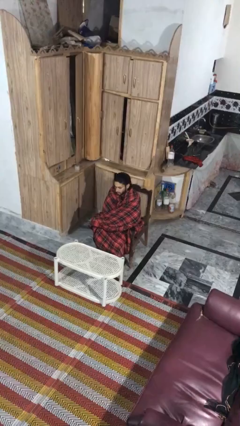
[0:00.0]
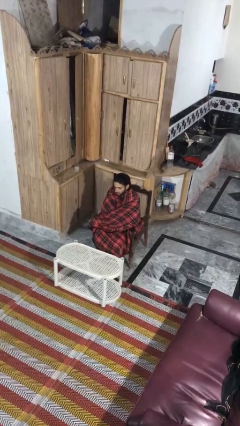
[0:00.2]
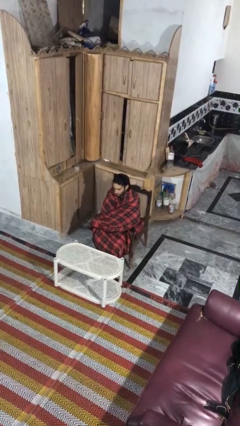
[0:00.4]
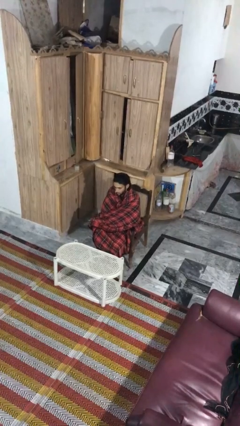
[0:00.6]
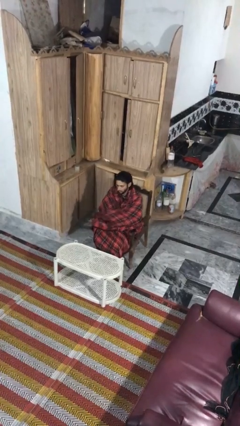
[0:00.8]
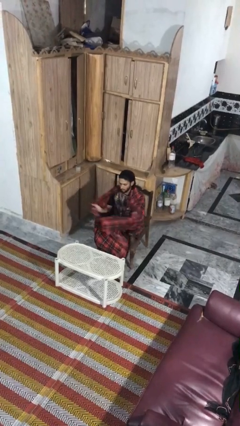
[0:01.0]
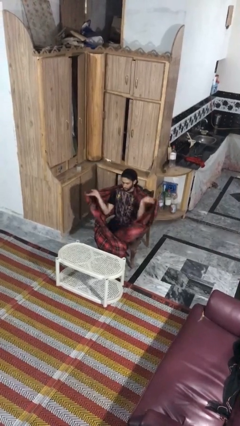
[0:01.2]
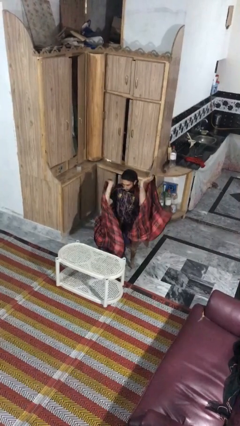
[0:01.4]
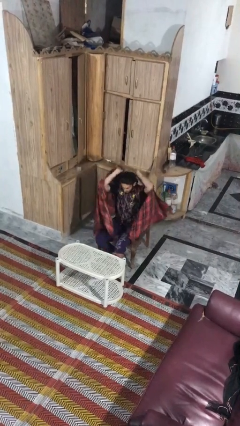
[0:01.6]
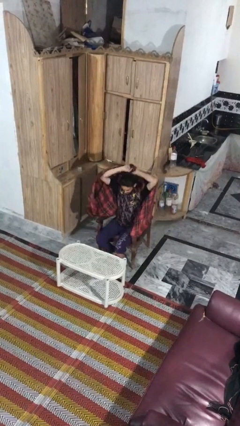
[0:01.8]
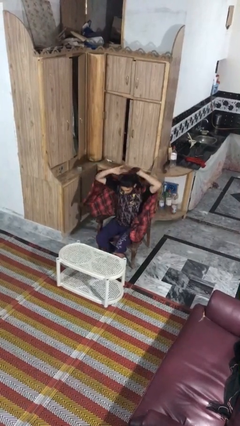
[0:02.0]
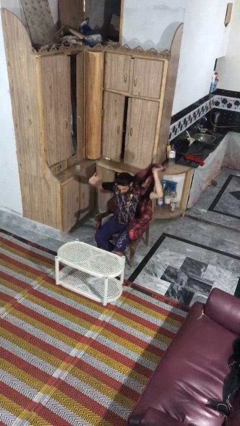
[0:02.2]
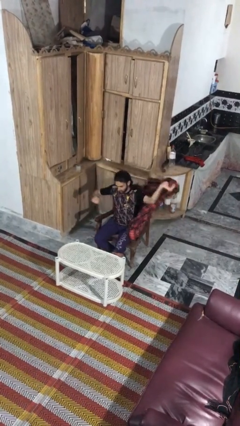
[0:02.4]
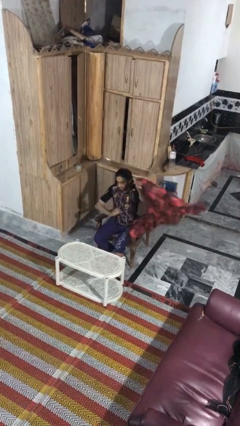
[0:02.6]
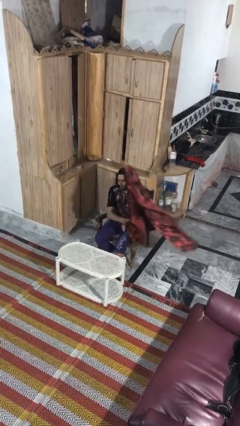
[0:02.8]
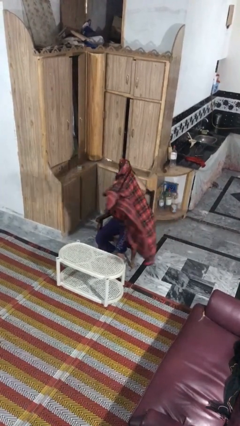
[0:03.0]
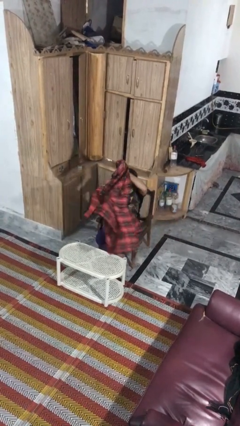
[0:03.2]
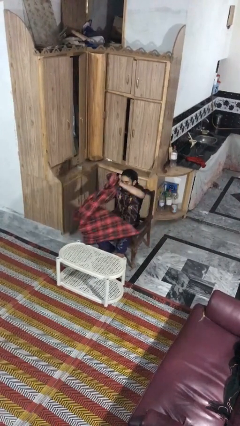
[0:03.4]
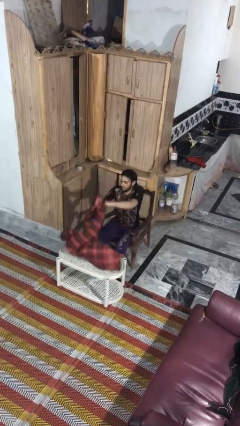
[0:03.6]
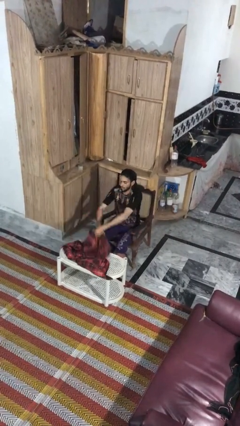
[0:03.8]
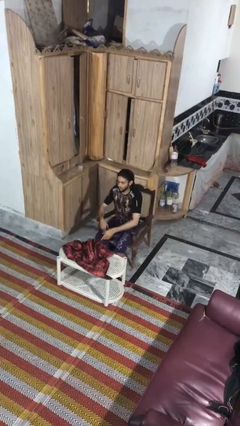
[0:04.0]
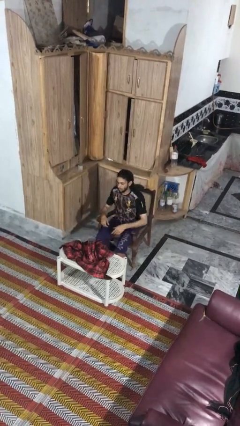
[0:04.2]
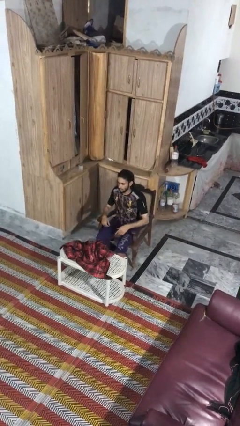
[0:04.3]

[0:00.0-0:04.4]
person uncovers with blanket

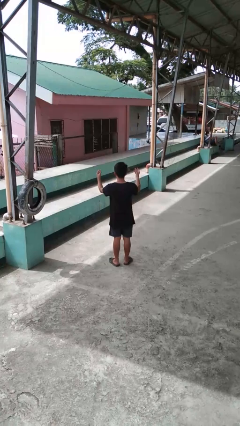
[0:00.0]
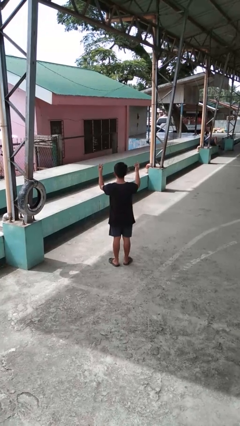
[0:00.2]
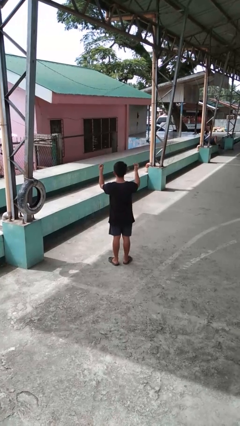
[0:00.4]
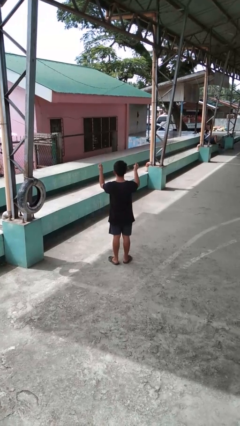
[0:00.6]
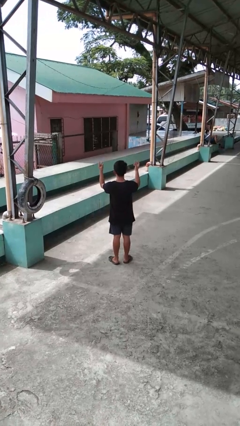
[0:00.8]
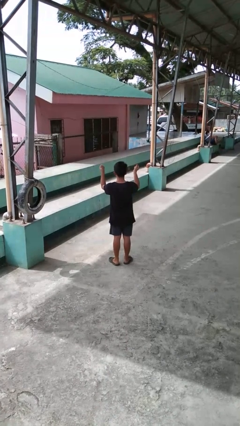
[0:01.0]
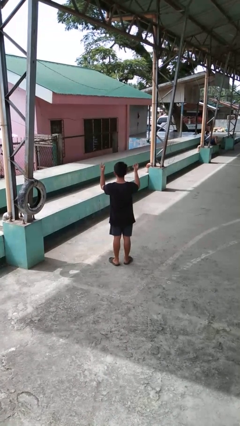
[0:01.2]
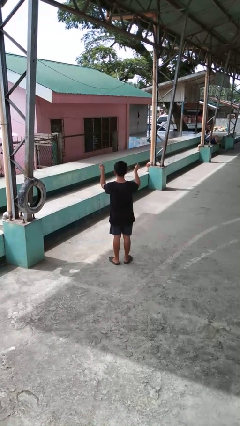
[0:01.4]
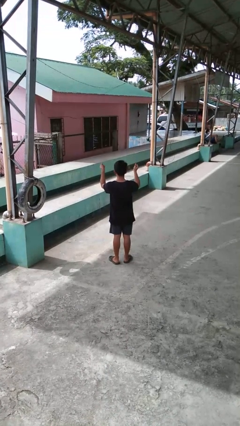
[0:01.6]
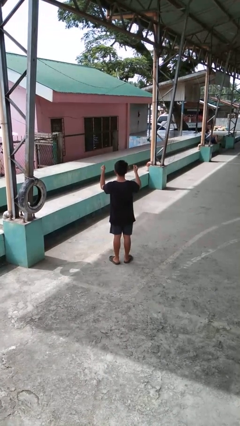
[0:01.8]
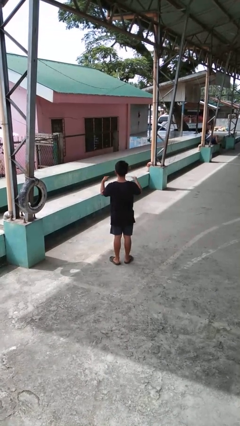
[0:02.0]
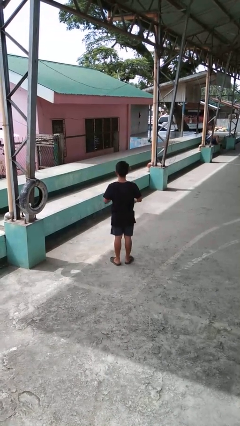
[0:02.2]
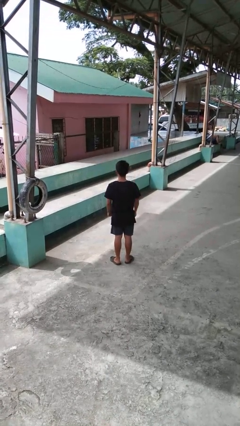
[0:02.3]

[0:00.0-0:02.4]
person snaps fingers

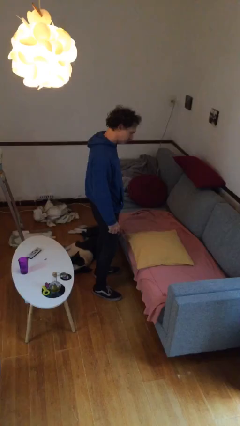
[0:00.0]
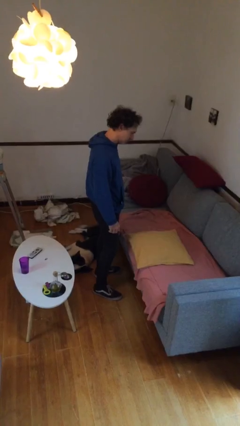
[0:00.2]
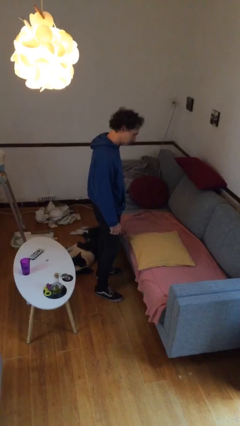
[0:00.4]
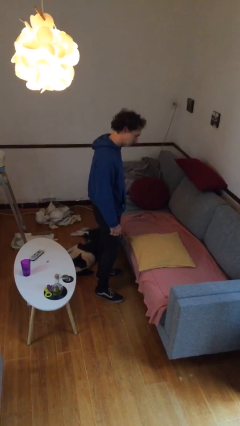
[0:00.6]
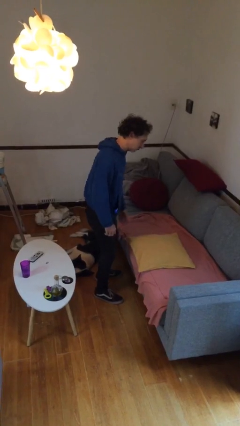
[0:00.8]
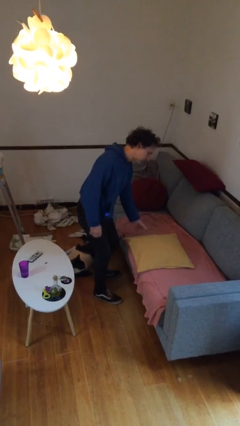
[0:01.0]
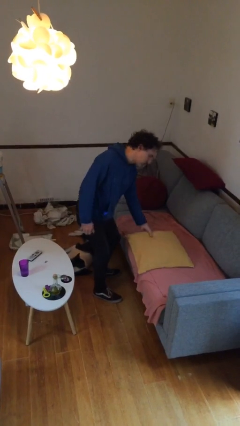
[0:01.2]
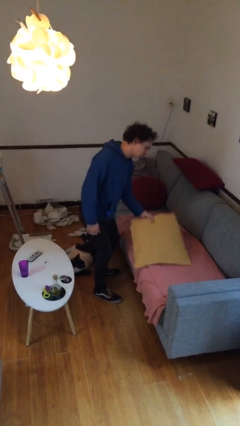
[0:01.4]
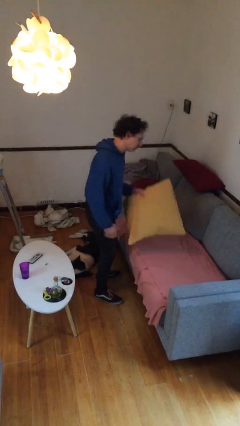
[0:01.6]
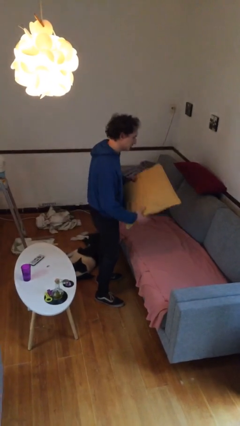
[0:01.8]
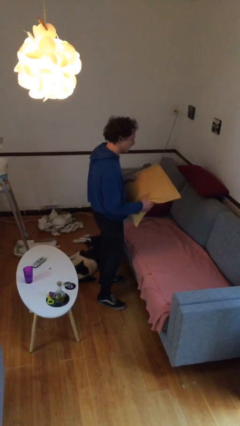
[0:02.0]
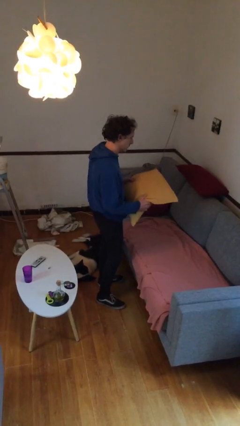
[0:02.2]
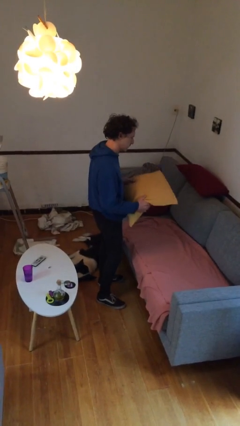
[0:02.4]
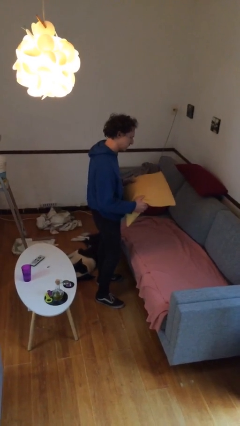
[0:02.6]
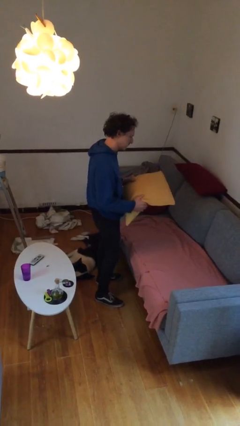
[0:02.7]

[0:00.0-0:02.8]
person picks up object from couch

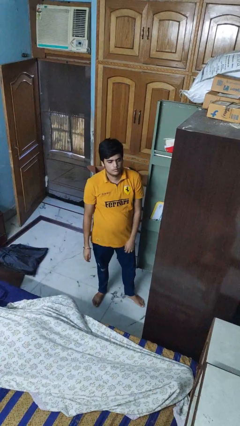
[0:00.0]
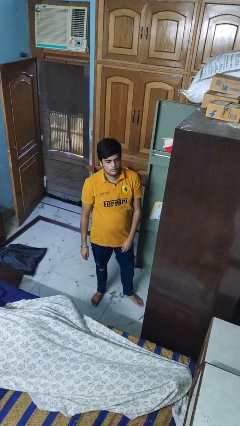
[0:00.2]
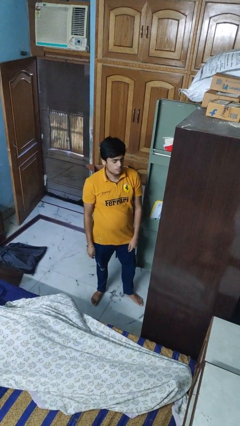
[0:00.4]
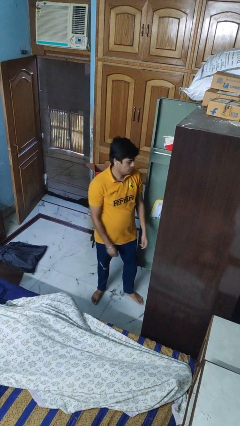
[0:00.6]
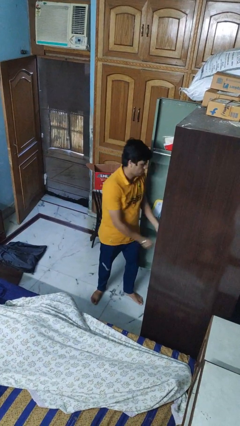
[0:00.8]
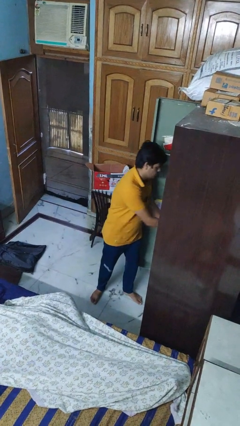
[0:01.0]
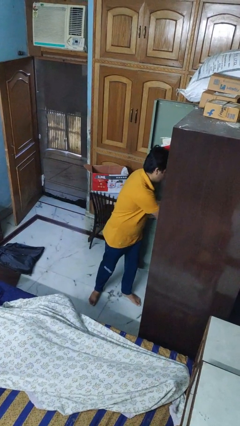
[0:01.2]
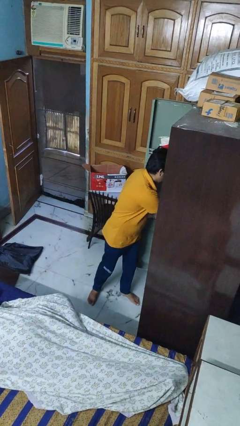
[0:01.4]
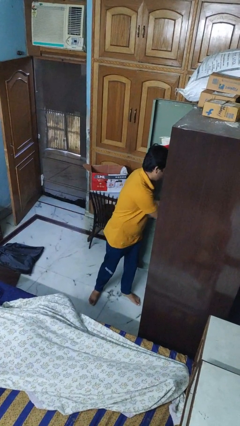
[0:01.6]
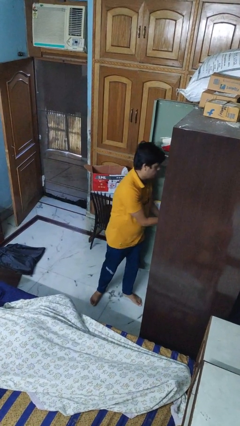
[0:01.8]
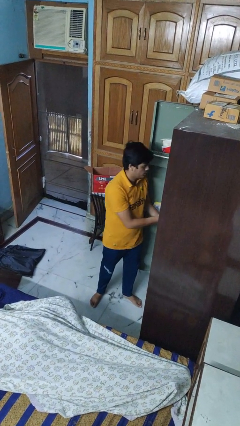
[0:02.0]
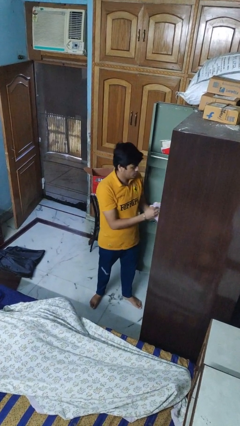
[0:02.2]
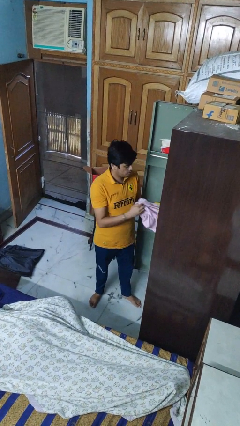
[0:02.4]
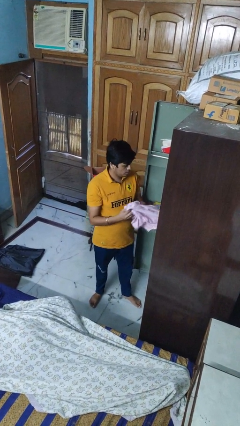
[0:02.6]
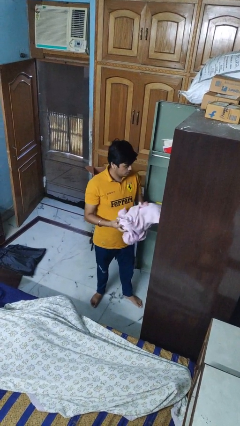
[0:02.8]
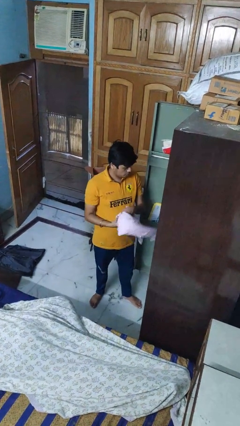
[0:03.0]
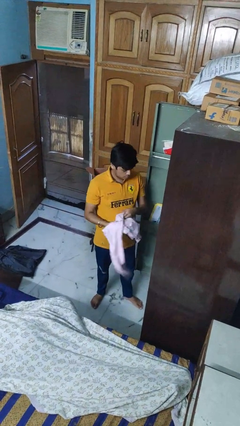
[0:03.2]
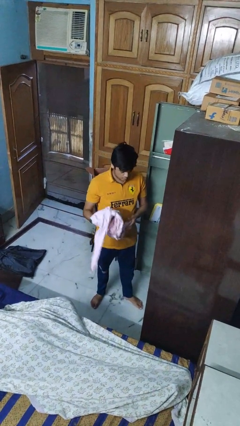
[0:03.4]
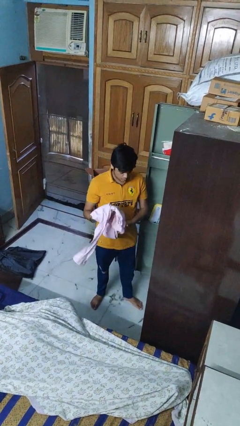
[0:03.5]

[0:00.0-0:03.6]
person takes clothes from dresser

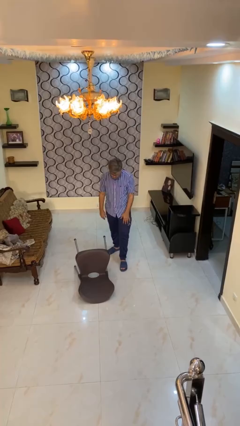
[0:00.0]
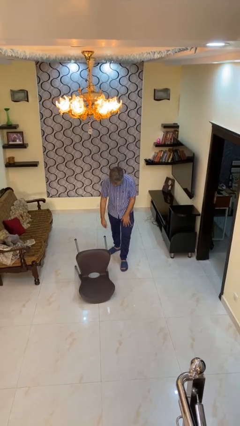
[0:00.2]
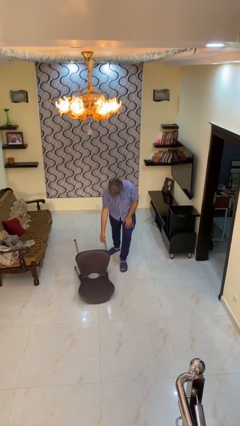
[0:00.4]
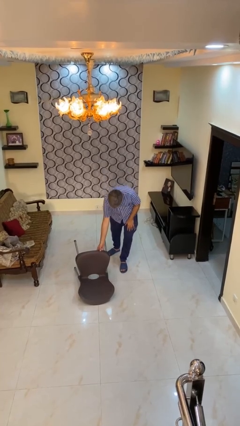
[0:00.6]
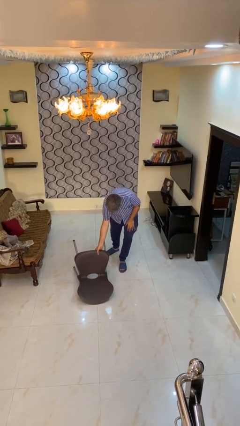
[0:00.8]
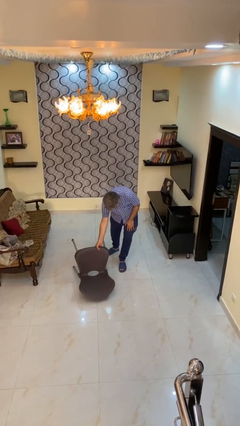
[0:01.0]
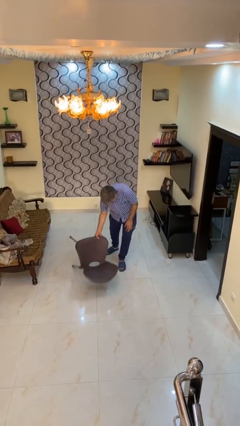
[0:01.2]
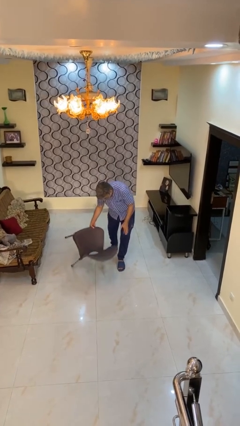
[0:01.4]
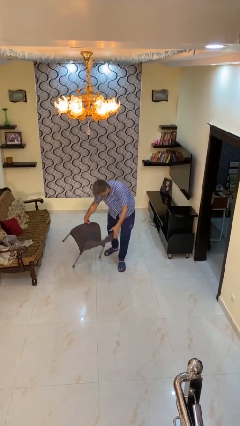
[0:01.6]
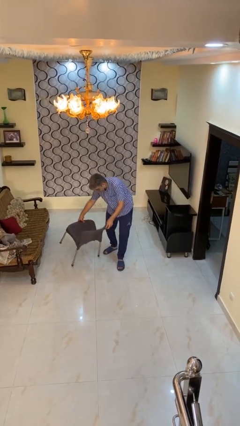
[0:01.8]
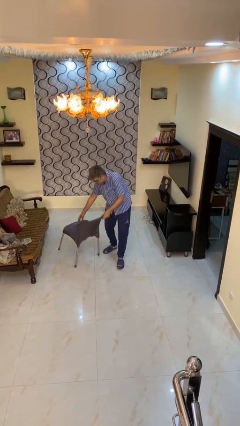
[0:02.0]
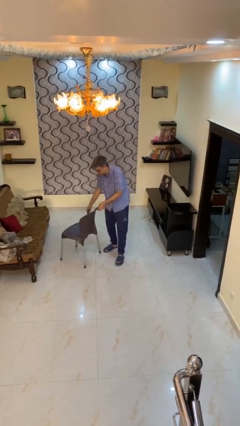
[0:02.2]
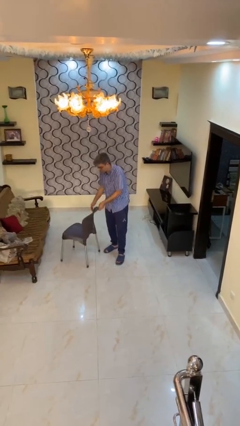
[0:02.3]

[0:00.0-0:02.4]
person sets upright furniture

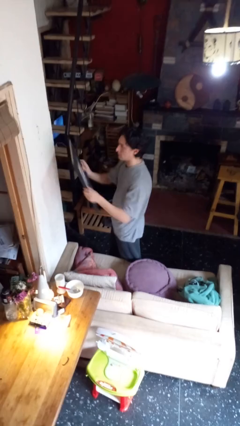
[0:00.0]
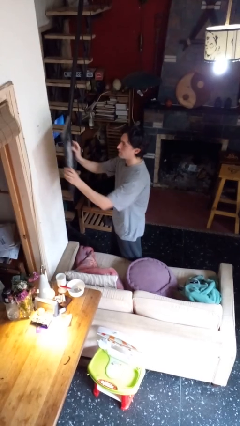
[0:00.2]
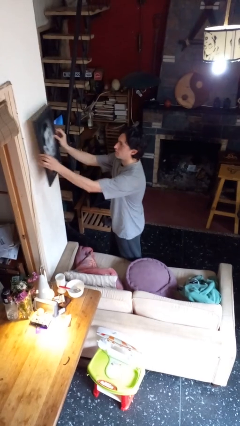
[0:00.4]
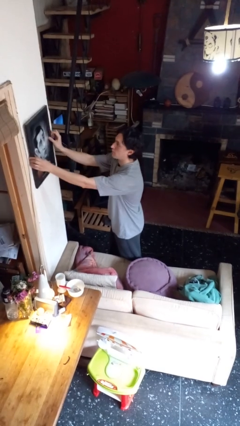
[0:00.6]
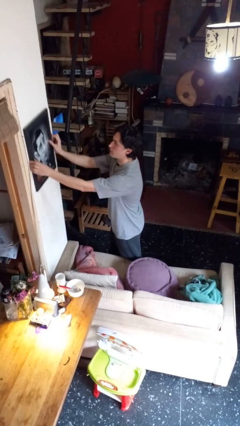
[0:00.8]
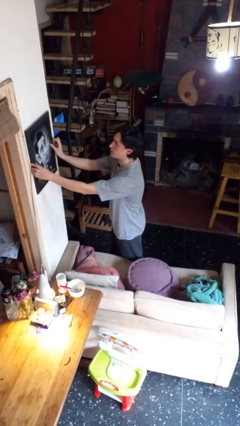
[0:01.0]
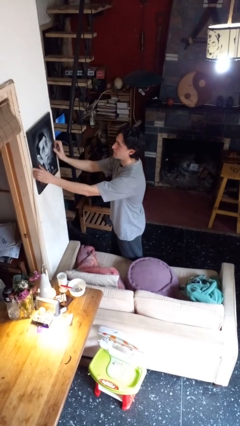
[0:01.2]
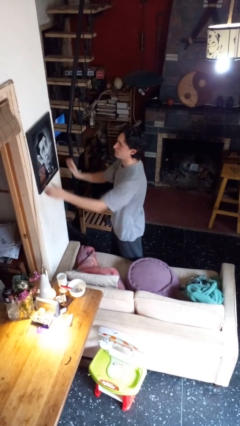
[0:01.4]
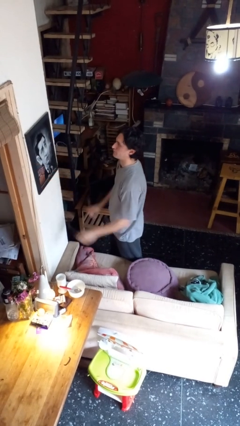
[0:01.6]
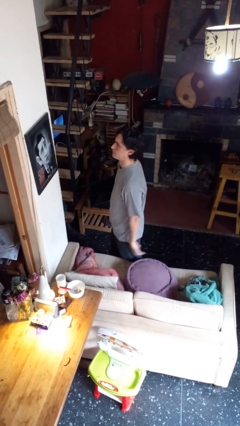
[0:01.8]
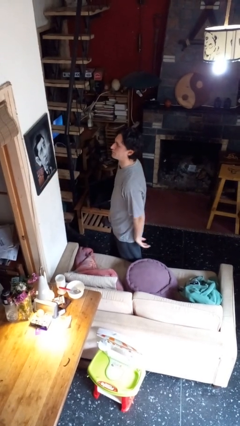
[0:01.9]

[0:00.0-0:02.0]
person puts up picture frame
